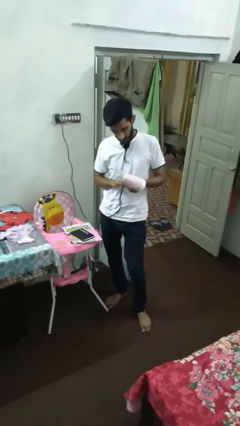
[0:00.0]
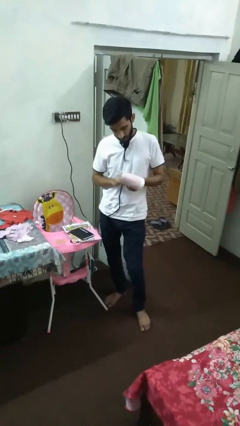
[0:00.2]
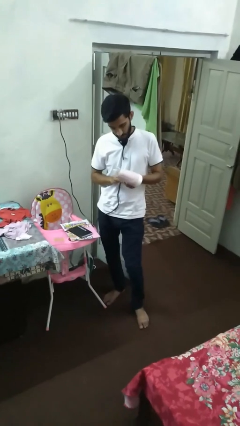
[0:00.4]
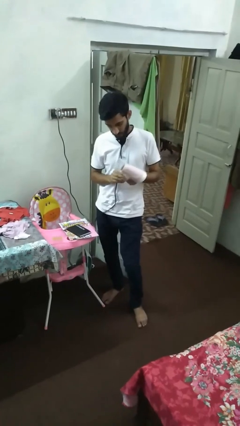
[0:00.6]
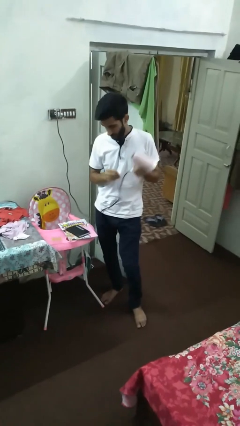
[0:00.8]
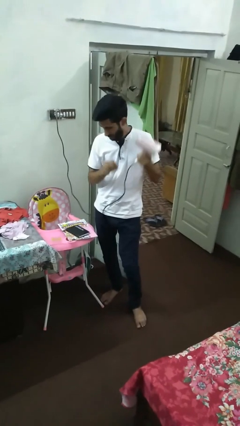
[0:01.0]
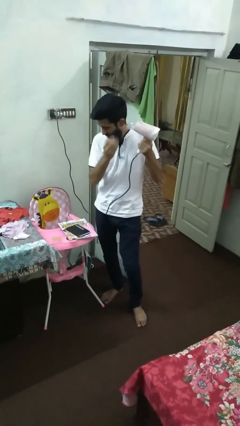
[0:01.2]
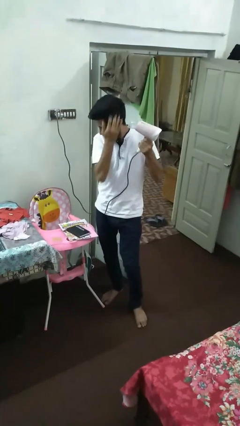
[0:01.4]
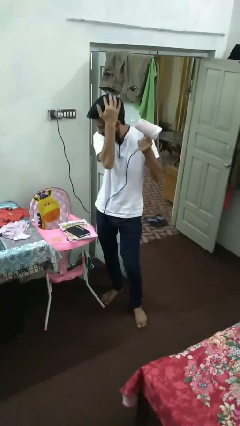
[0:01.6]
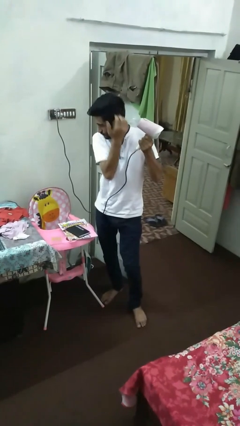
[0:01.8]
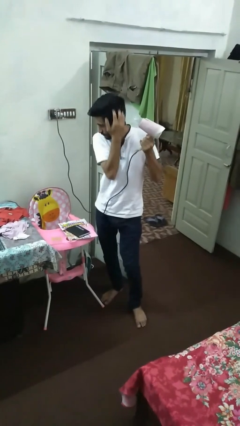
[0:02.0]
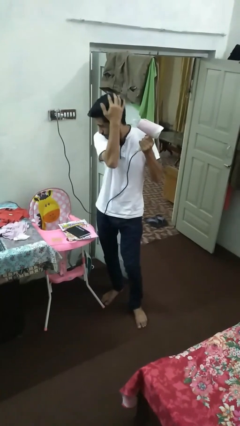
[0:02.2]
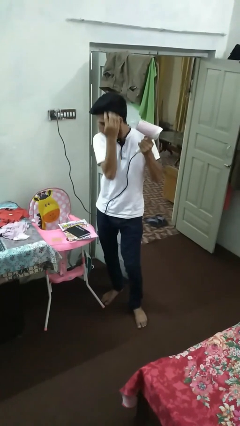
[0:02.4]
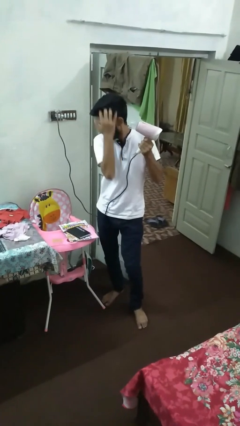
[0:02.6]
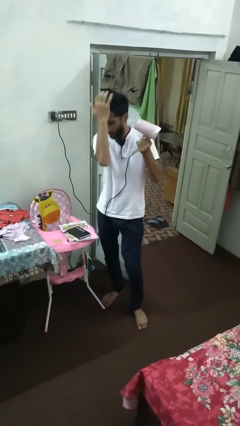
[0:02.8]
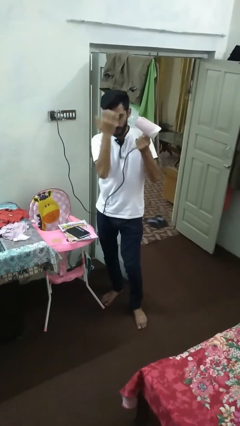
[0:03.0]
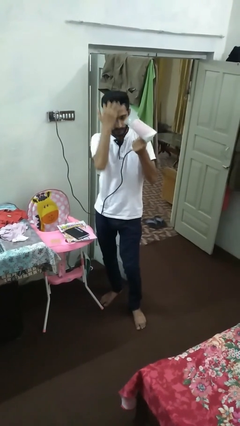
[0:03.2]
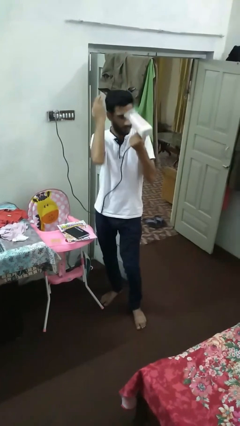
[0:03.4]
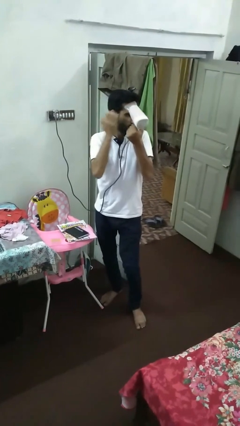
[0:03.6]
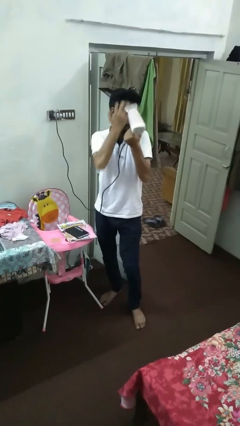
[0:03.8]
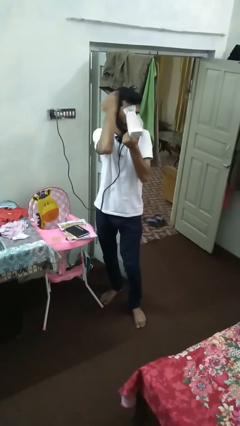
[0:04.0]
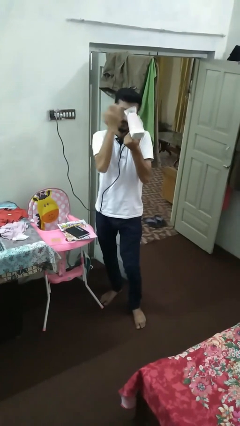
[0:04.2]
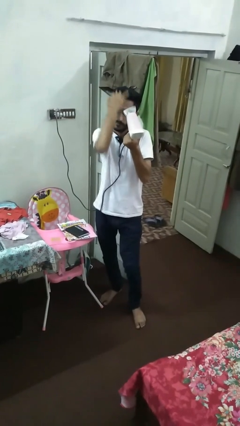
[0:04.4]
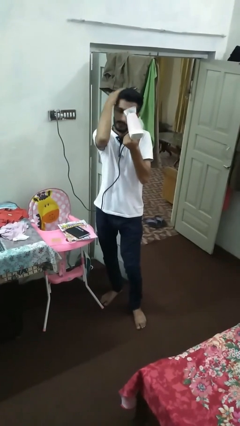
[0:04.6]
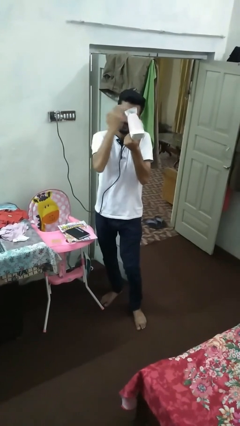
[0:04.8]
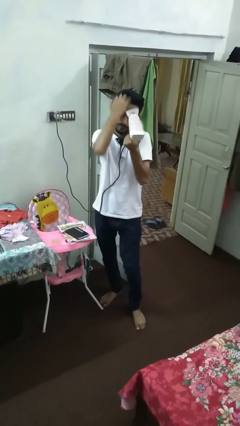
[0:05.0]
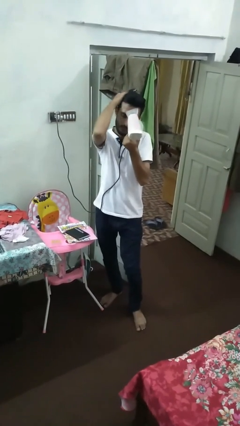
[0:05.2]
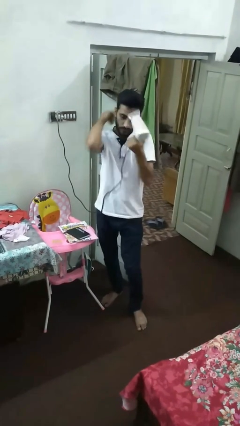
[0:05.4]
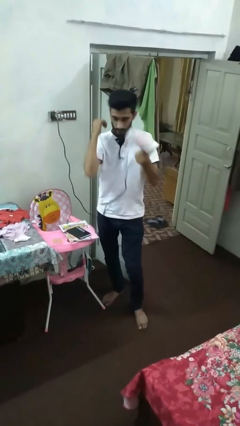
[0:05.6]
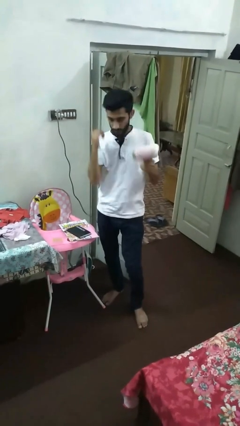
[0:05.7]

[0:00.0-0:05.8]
person dries hair with hairdryer

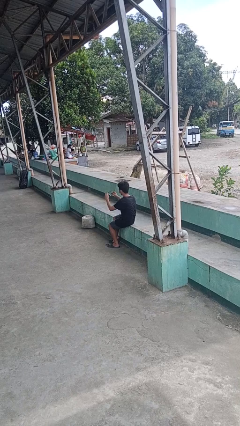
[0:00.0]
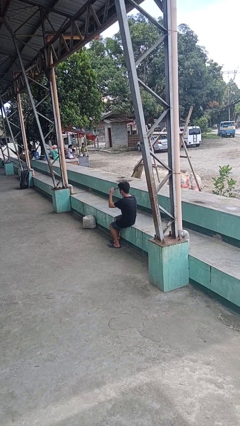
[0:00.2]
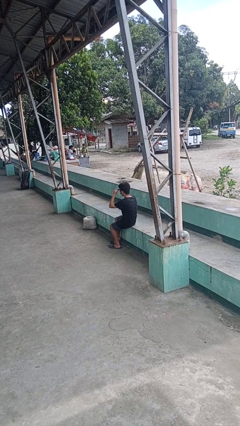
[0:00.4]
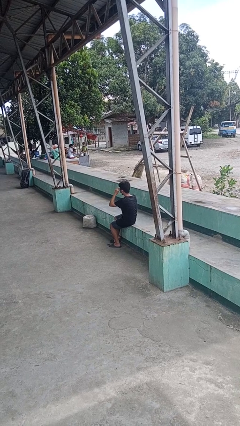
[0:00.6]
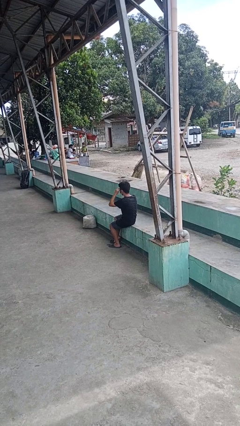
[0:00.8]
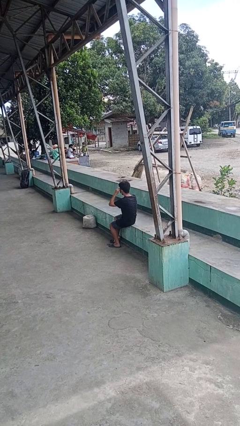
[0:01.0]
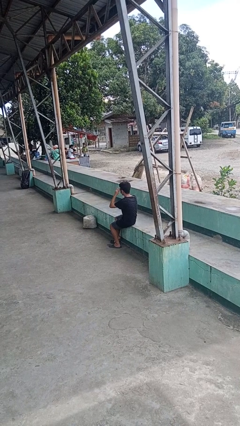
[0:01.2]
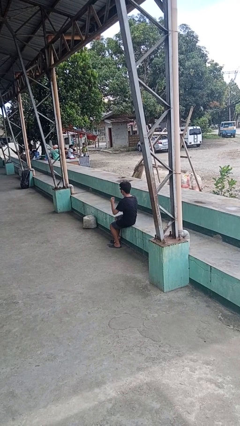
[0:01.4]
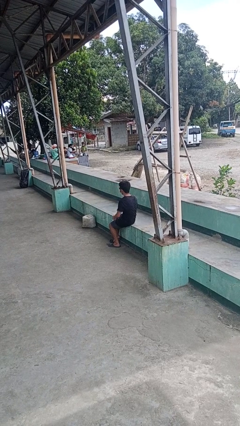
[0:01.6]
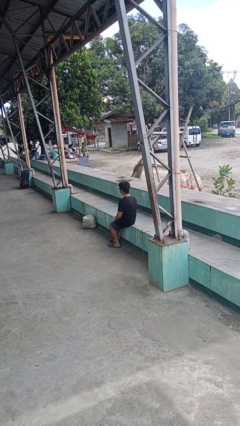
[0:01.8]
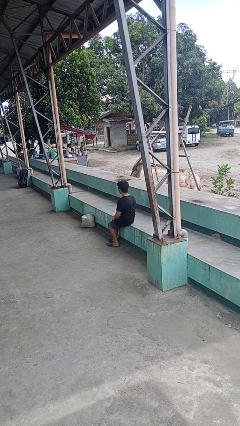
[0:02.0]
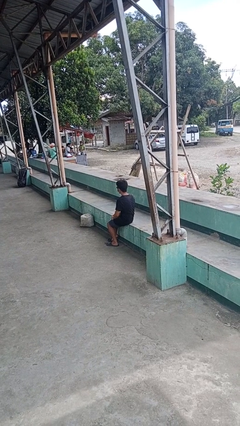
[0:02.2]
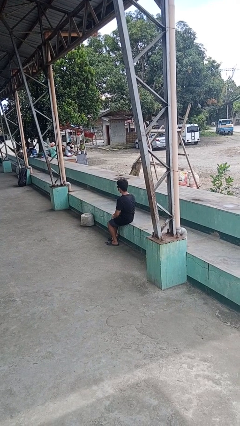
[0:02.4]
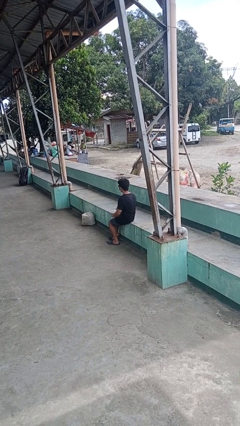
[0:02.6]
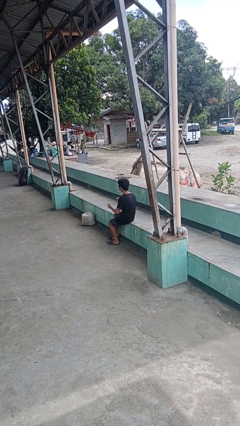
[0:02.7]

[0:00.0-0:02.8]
person puts on sunglasses

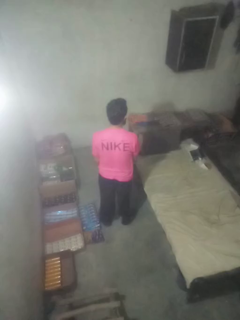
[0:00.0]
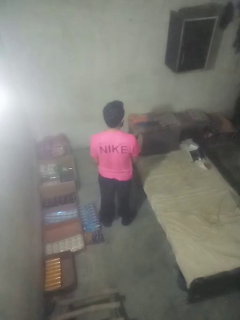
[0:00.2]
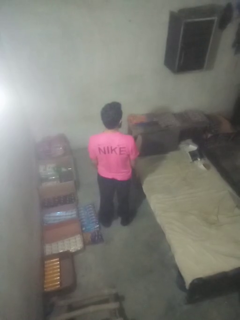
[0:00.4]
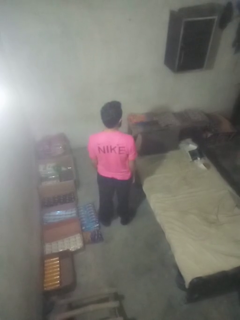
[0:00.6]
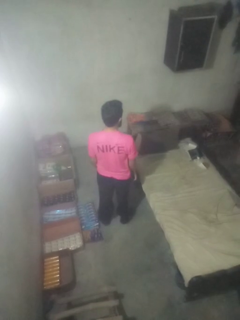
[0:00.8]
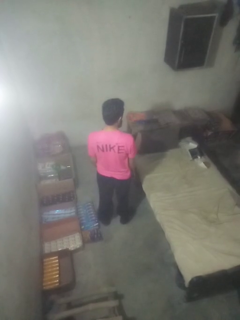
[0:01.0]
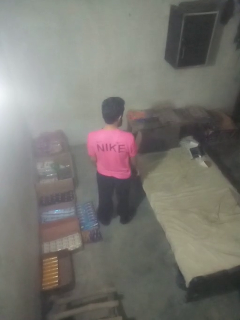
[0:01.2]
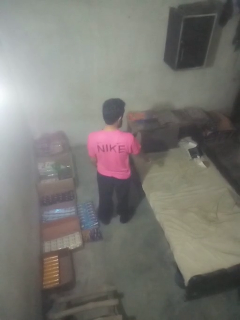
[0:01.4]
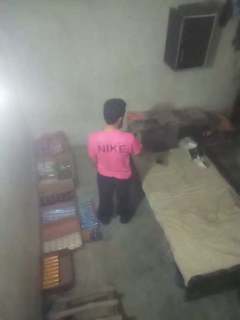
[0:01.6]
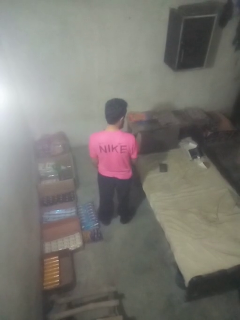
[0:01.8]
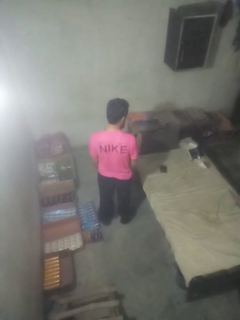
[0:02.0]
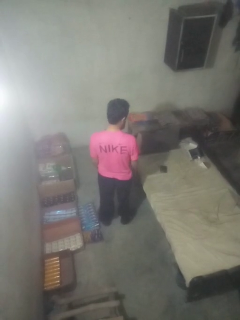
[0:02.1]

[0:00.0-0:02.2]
person throws object on bed

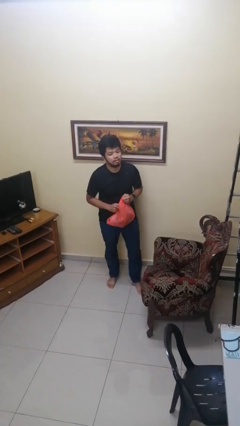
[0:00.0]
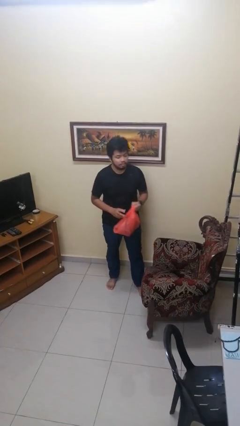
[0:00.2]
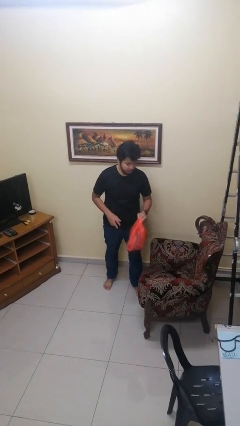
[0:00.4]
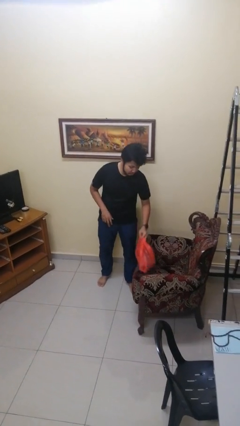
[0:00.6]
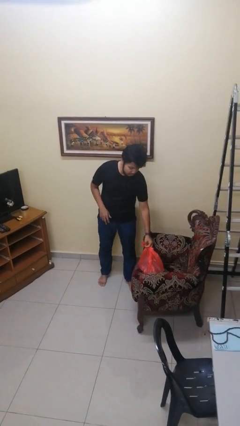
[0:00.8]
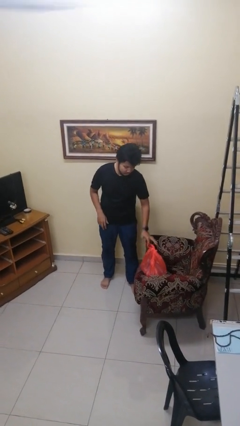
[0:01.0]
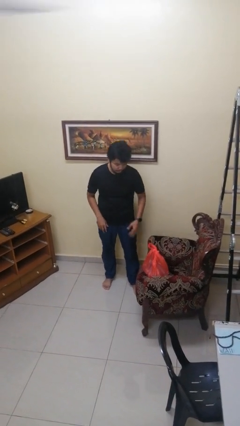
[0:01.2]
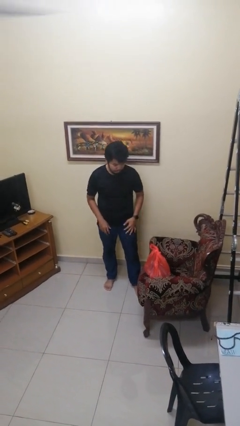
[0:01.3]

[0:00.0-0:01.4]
person puts down object on couch

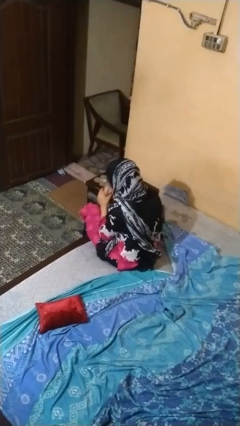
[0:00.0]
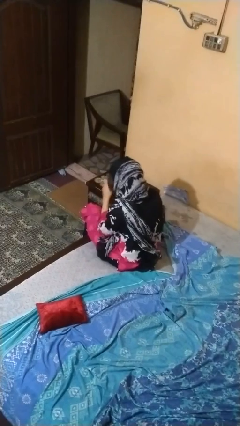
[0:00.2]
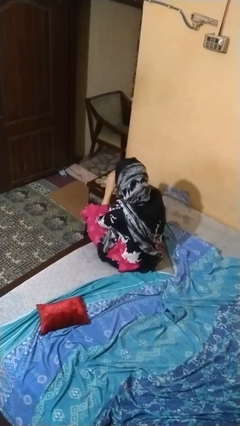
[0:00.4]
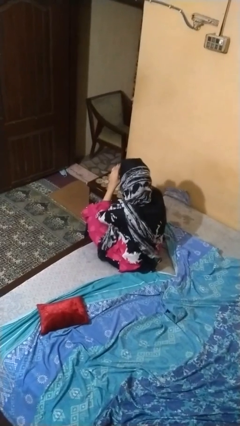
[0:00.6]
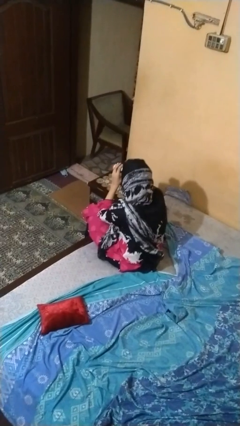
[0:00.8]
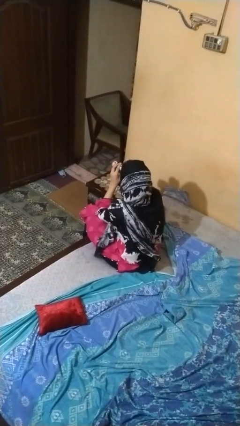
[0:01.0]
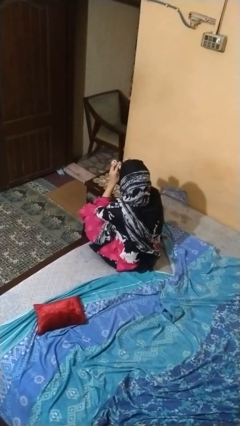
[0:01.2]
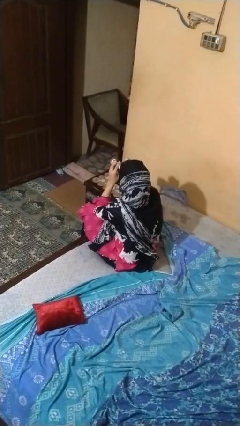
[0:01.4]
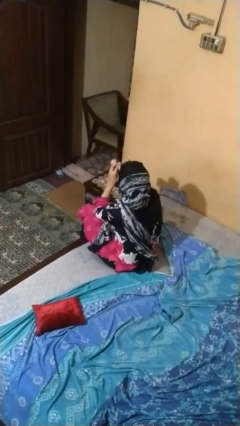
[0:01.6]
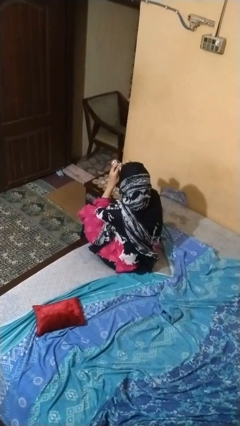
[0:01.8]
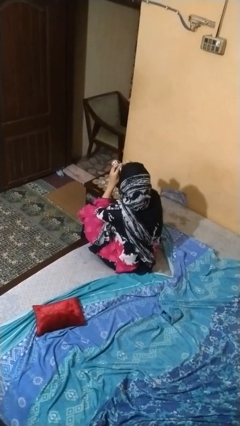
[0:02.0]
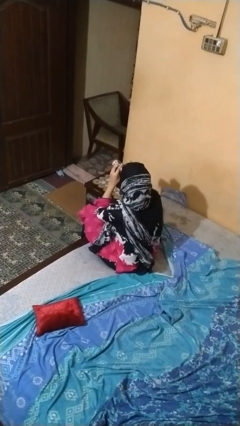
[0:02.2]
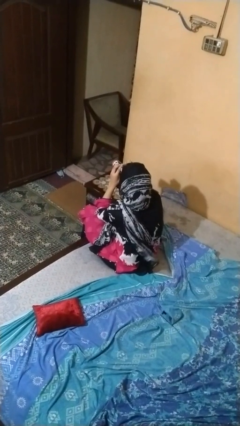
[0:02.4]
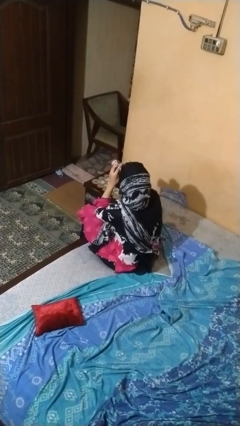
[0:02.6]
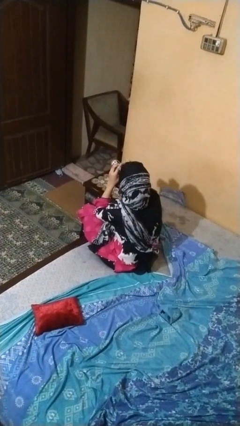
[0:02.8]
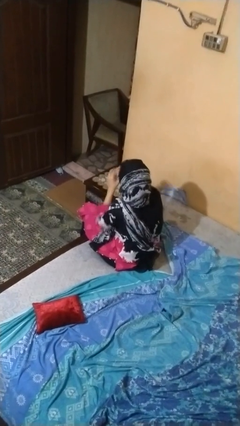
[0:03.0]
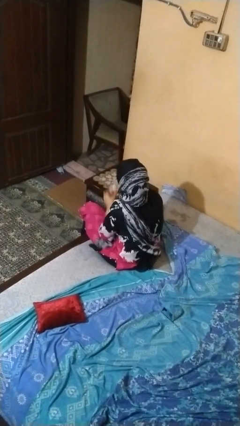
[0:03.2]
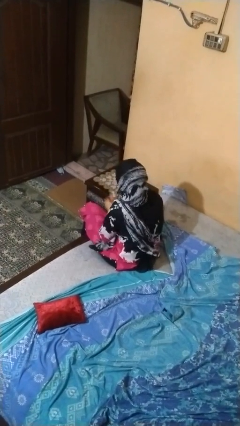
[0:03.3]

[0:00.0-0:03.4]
person drinks from beverage can

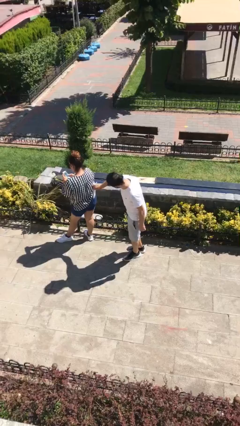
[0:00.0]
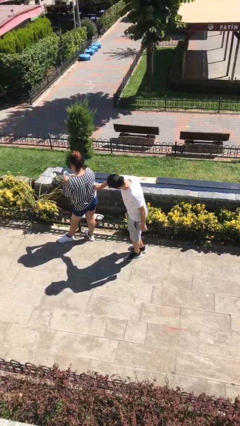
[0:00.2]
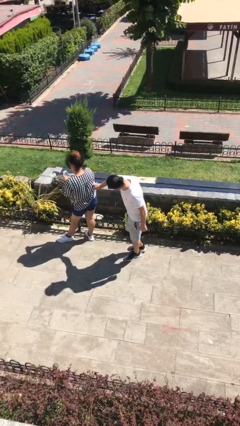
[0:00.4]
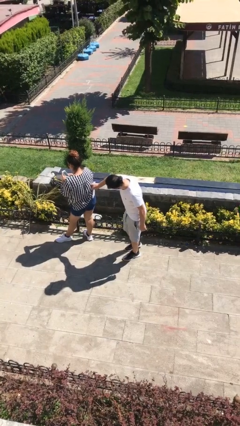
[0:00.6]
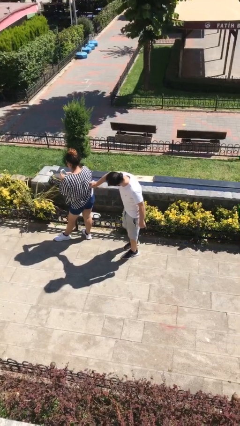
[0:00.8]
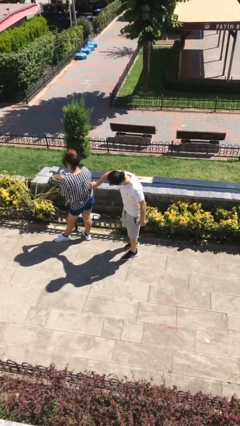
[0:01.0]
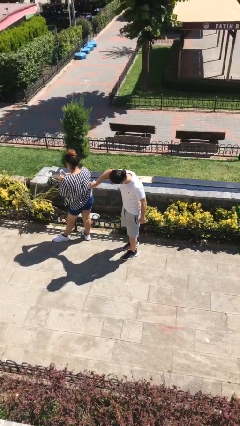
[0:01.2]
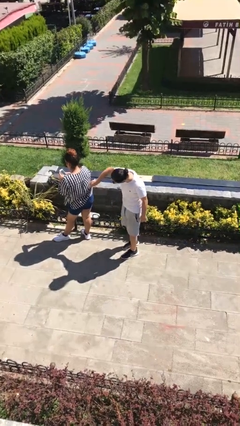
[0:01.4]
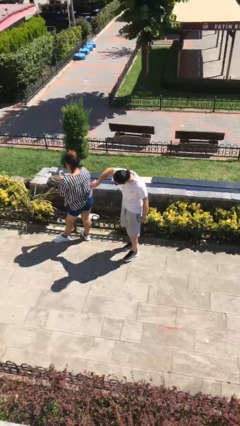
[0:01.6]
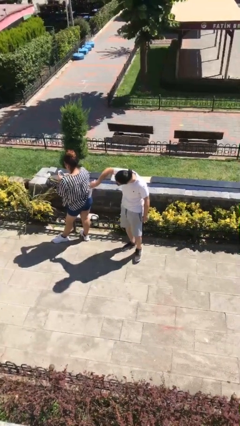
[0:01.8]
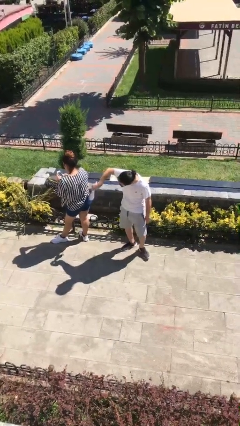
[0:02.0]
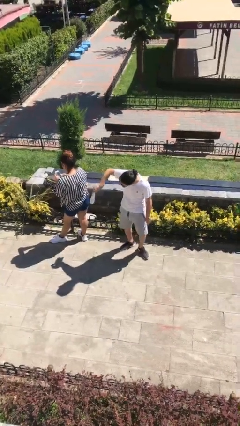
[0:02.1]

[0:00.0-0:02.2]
person steals object from person

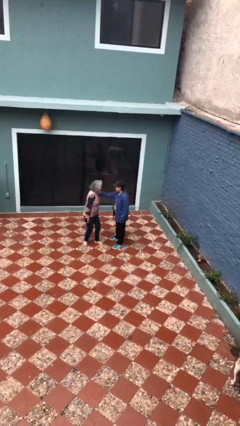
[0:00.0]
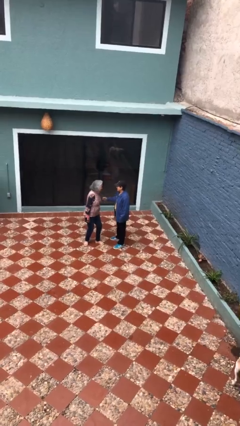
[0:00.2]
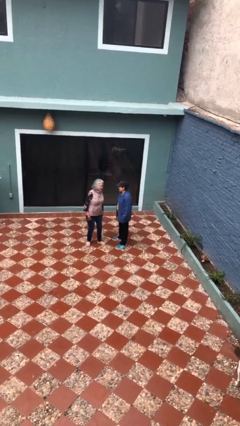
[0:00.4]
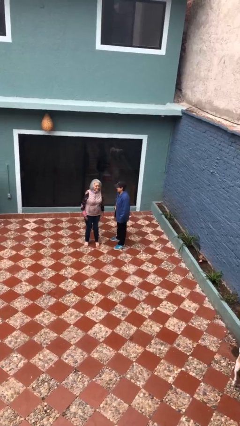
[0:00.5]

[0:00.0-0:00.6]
person spins person around
